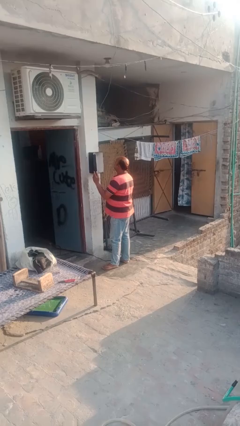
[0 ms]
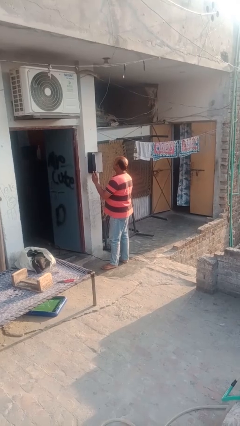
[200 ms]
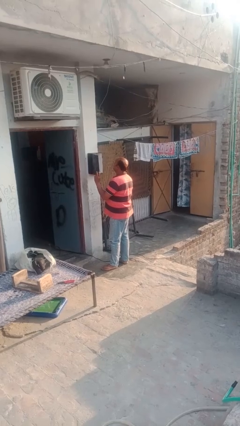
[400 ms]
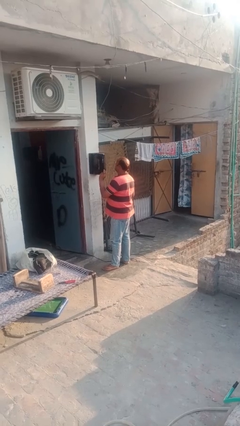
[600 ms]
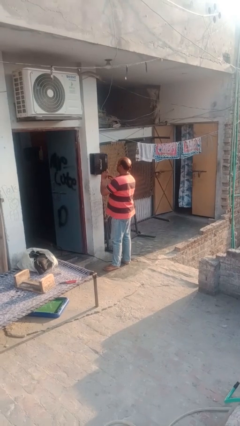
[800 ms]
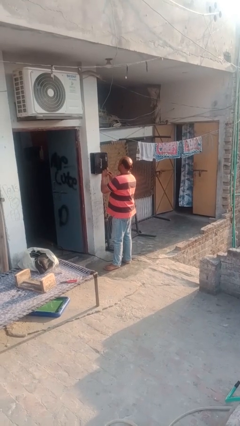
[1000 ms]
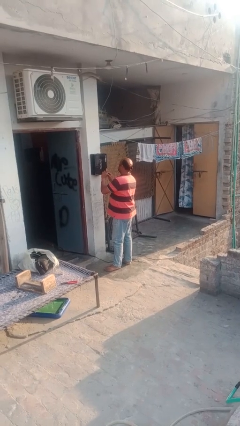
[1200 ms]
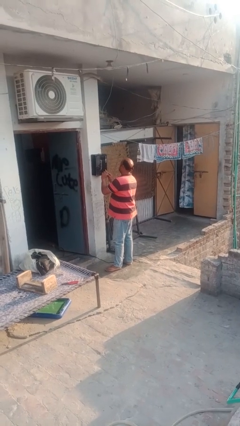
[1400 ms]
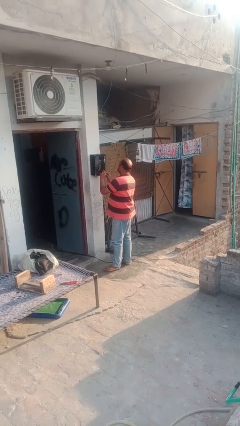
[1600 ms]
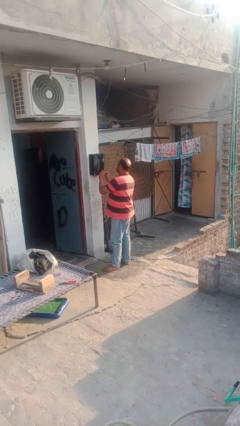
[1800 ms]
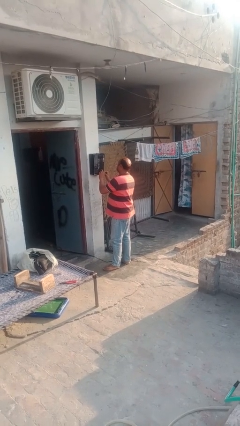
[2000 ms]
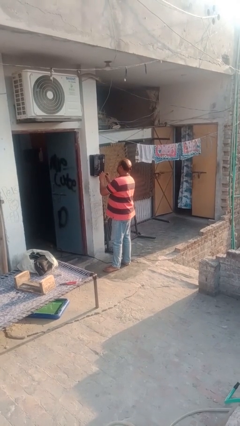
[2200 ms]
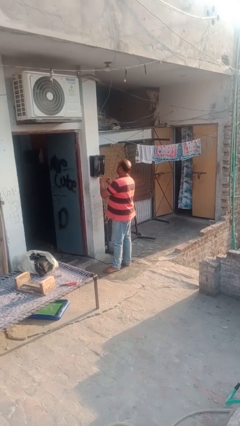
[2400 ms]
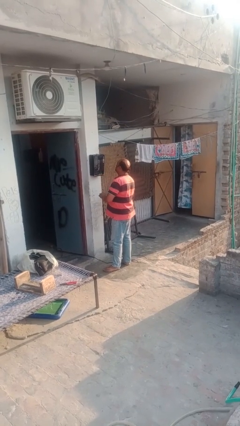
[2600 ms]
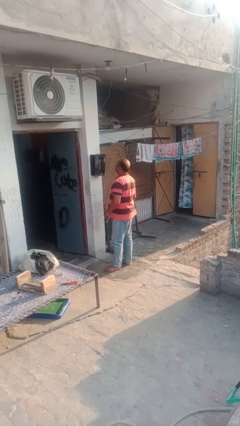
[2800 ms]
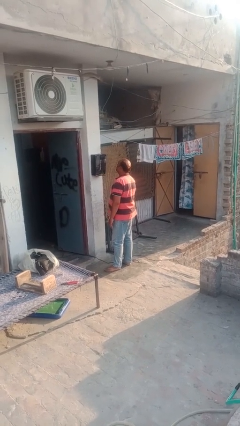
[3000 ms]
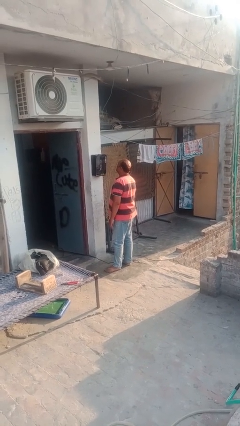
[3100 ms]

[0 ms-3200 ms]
person closes mailbox

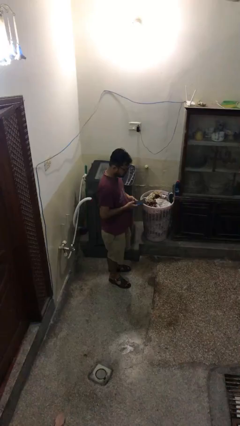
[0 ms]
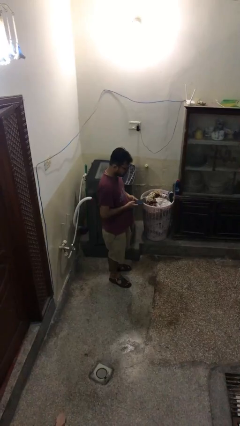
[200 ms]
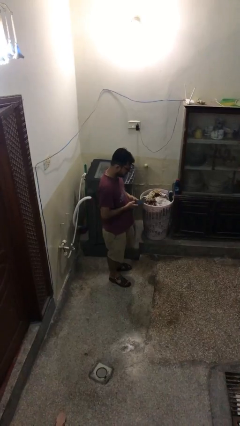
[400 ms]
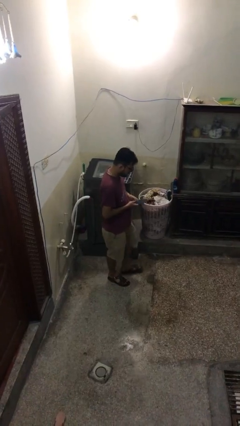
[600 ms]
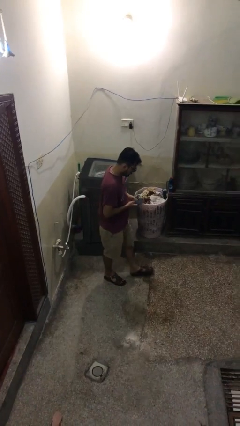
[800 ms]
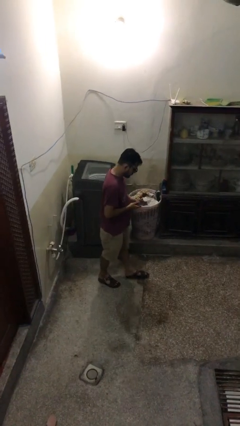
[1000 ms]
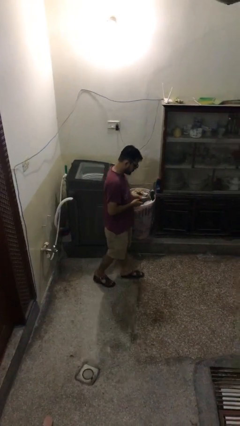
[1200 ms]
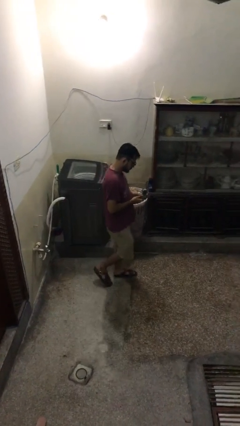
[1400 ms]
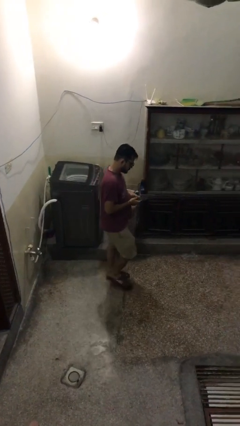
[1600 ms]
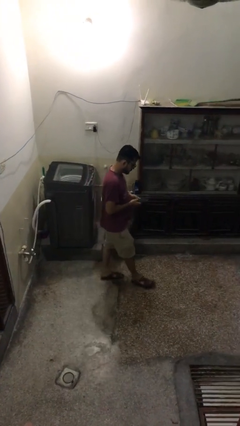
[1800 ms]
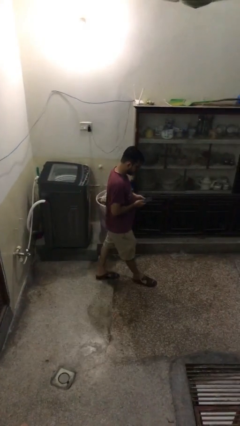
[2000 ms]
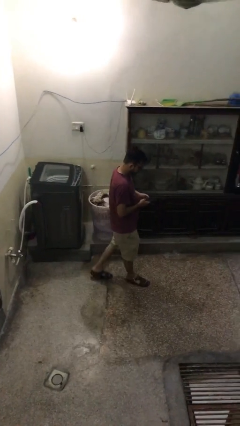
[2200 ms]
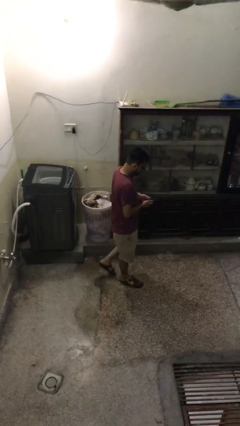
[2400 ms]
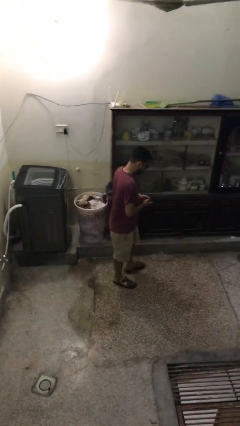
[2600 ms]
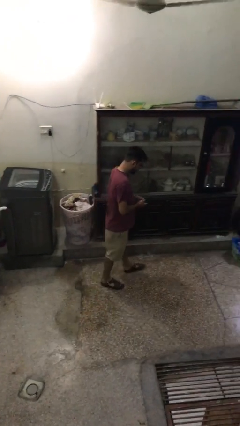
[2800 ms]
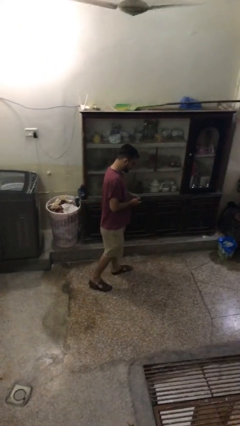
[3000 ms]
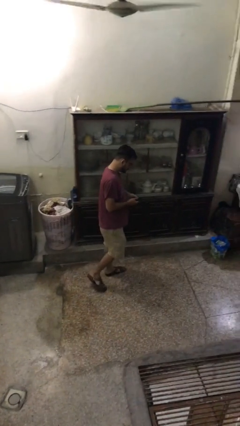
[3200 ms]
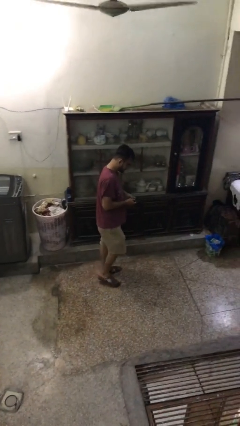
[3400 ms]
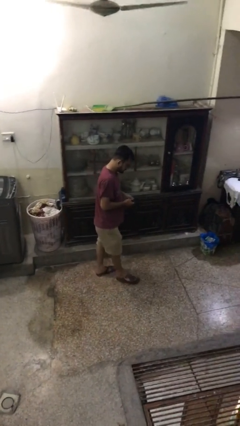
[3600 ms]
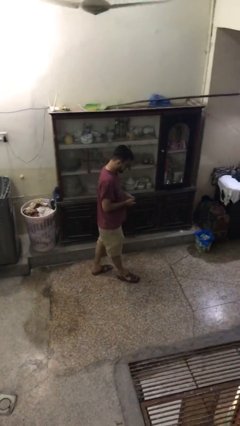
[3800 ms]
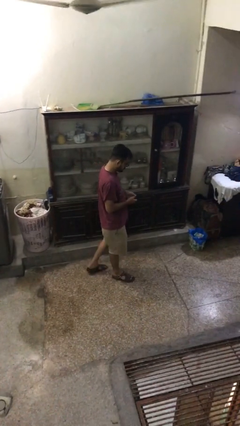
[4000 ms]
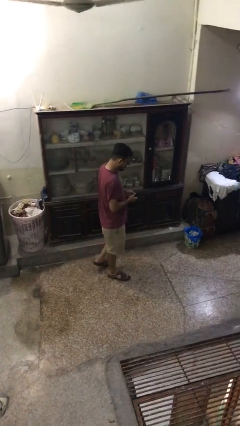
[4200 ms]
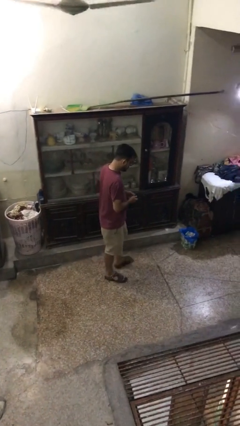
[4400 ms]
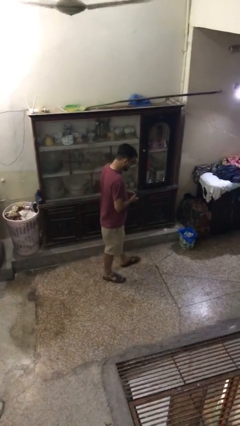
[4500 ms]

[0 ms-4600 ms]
person texts on phone

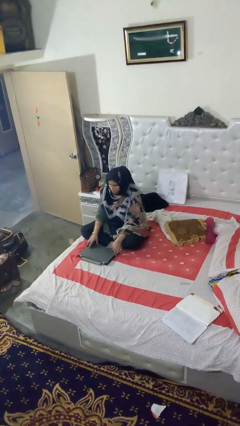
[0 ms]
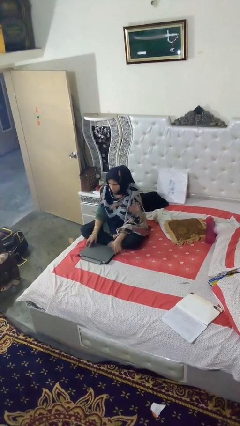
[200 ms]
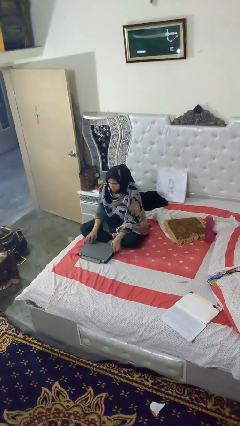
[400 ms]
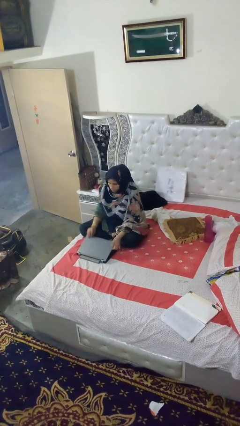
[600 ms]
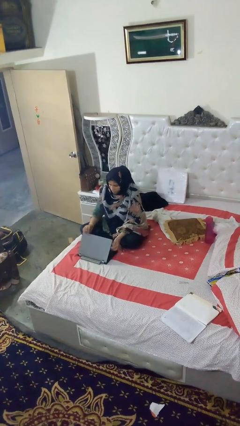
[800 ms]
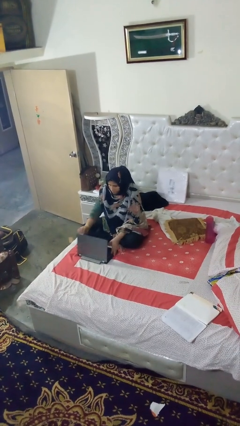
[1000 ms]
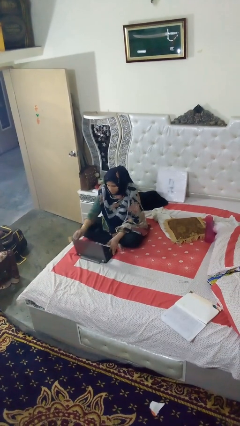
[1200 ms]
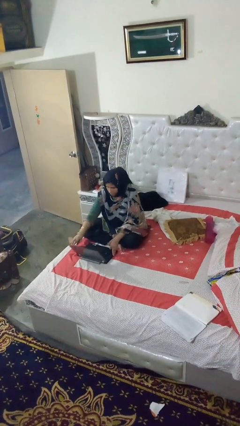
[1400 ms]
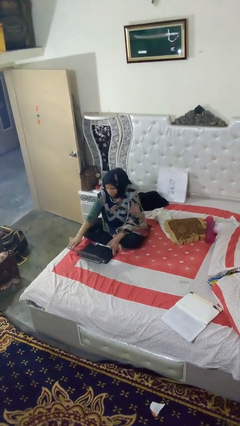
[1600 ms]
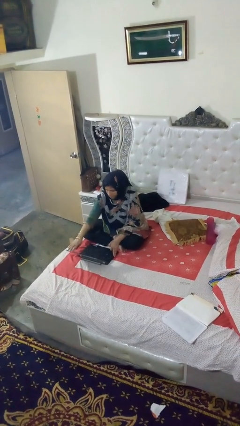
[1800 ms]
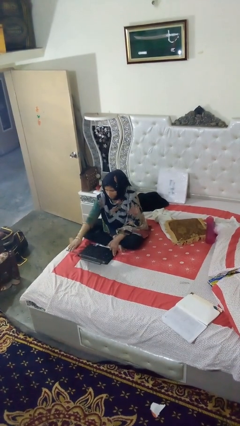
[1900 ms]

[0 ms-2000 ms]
person opens laptop

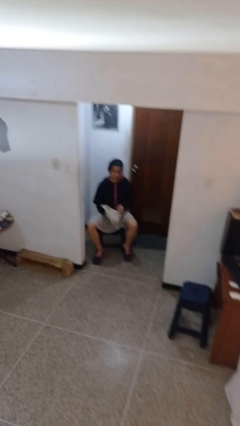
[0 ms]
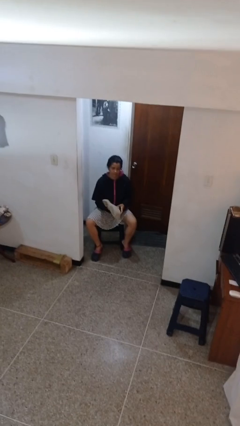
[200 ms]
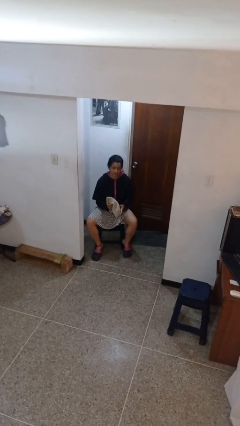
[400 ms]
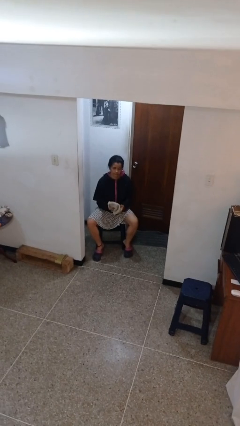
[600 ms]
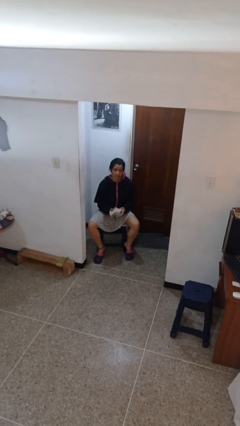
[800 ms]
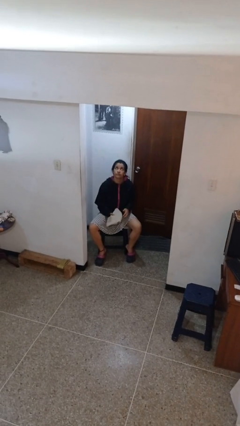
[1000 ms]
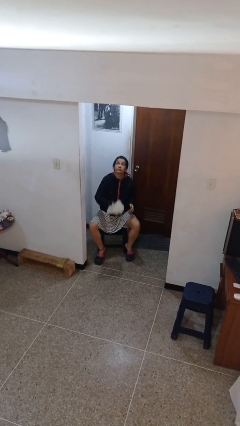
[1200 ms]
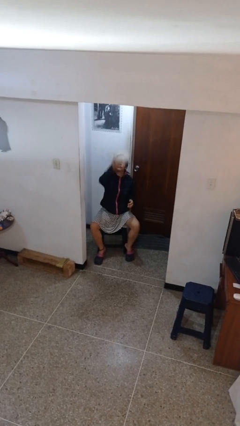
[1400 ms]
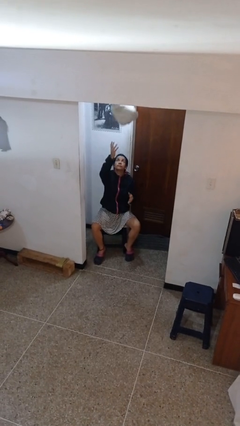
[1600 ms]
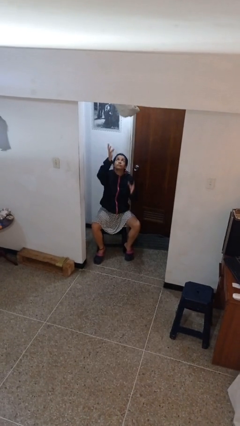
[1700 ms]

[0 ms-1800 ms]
person drops object

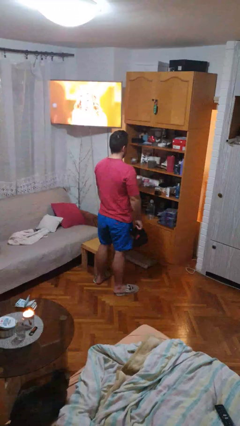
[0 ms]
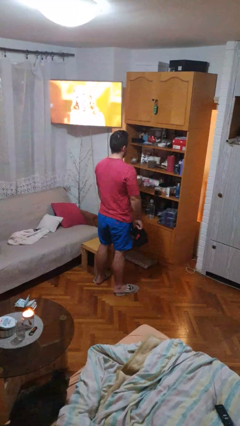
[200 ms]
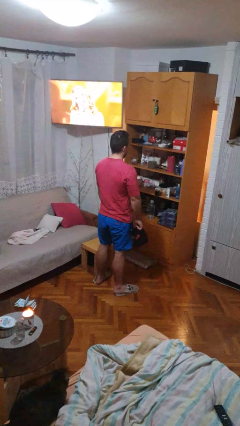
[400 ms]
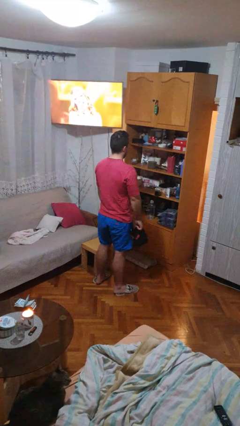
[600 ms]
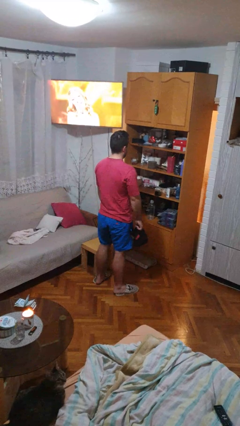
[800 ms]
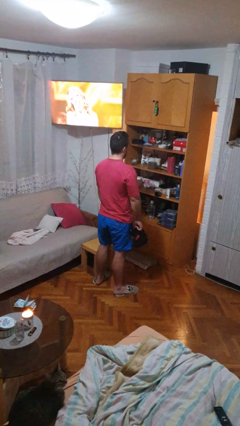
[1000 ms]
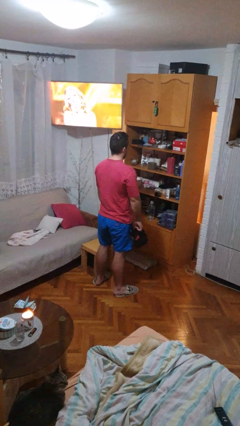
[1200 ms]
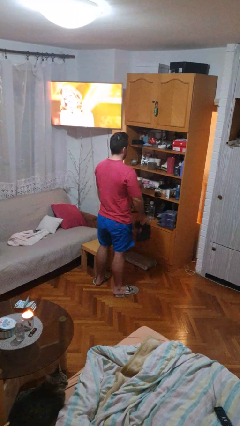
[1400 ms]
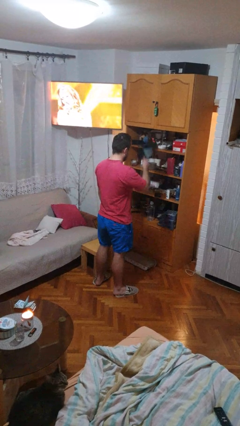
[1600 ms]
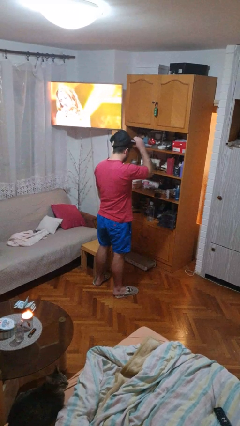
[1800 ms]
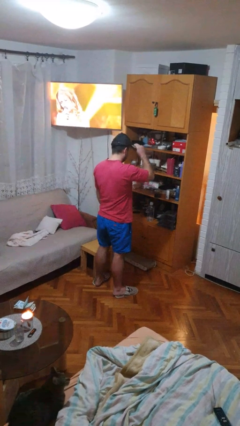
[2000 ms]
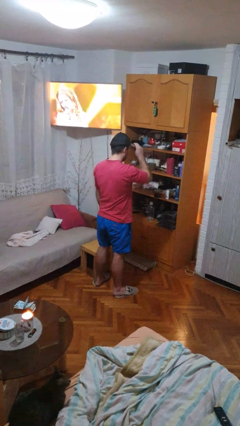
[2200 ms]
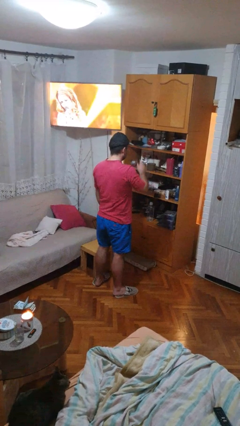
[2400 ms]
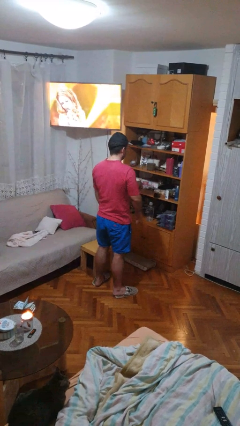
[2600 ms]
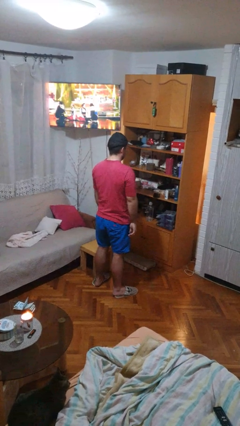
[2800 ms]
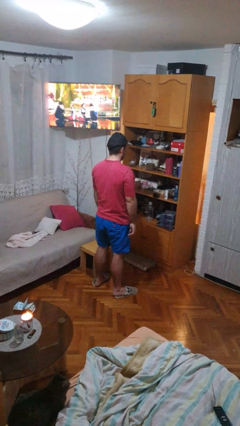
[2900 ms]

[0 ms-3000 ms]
person puts on hat

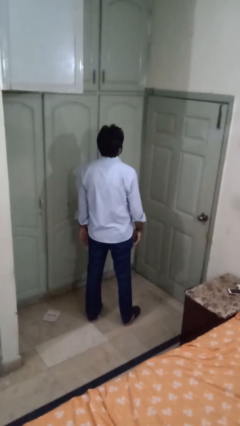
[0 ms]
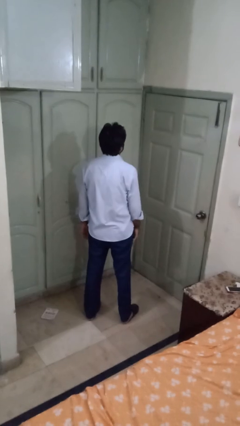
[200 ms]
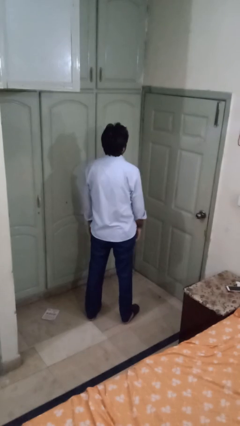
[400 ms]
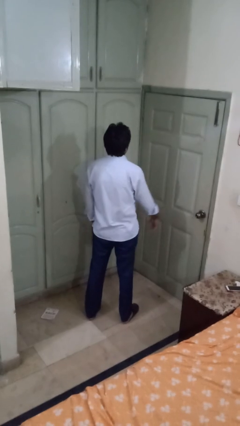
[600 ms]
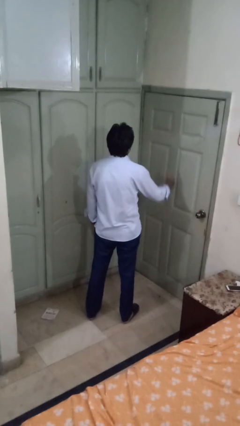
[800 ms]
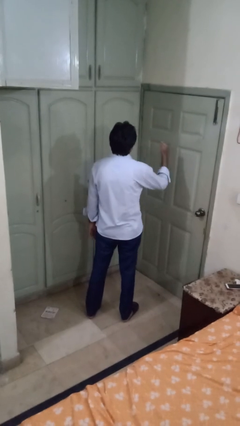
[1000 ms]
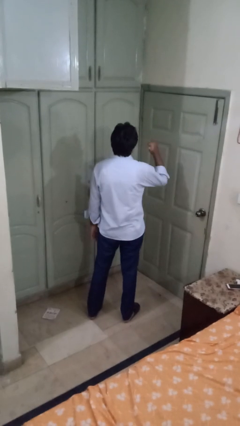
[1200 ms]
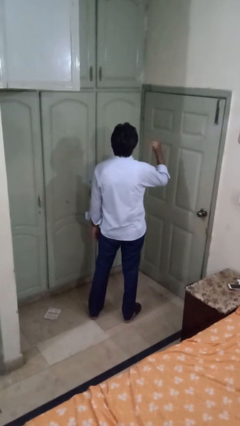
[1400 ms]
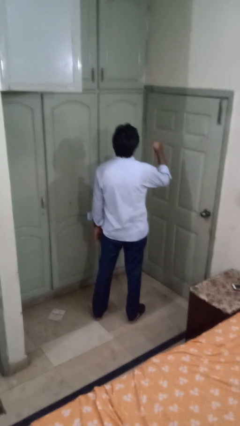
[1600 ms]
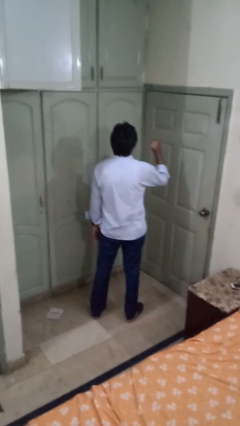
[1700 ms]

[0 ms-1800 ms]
person gestures behind me

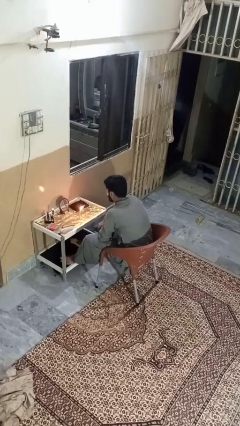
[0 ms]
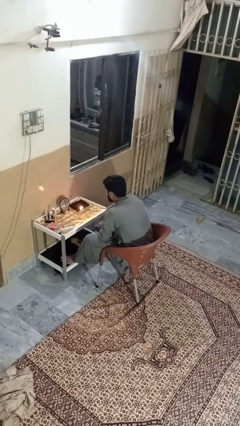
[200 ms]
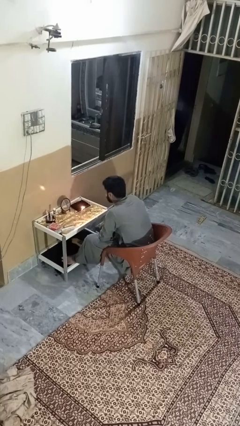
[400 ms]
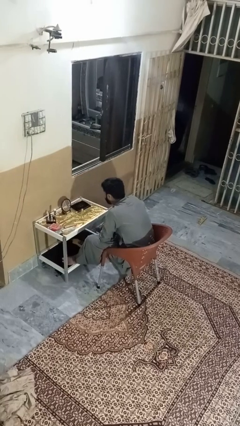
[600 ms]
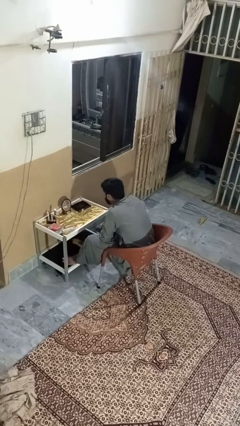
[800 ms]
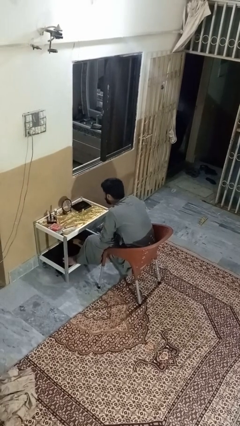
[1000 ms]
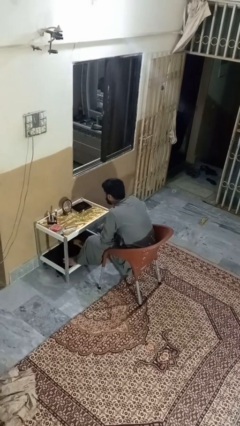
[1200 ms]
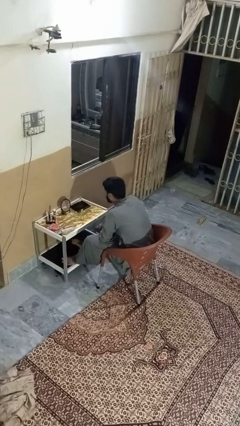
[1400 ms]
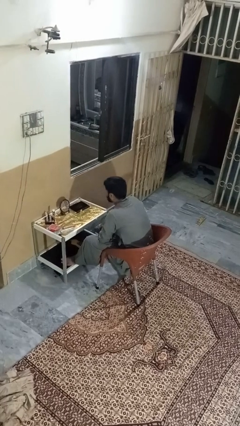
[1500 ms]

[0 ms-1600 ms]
person extinguishes candle
